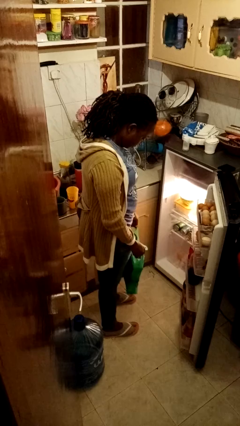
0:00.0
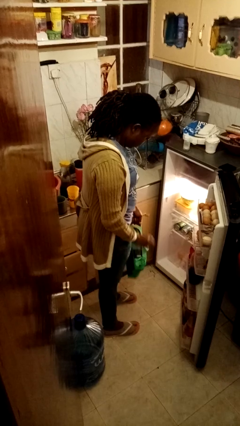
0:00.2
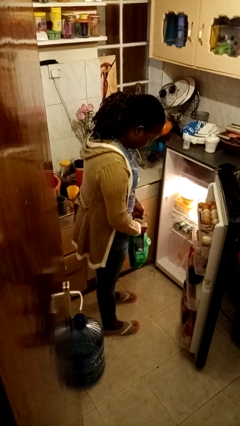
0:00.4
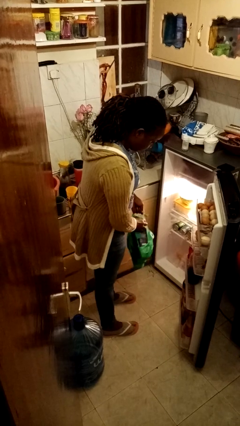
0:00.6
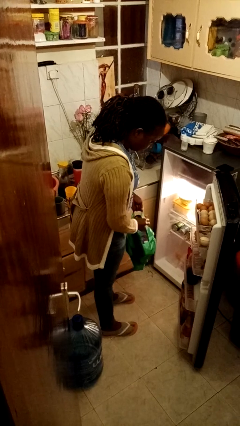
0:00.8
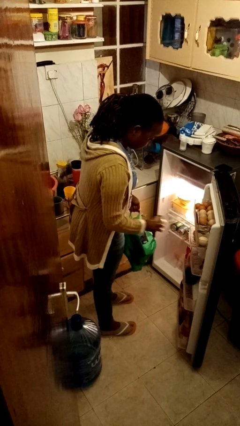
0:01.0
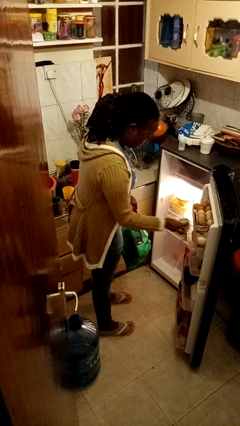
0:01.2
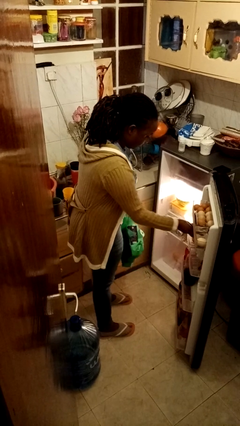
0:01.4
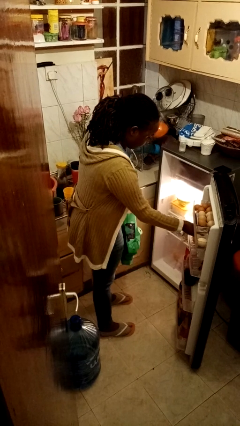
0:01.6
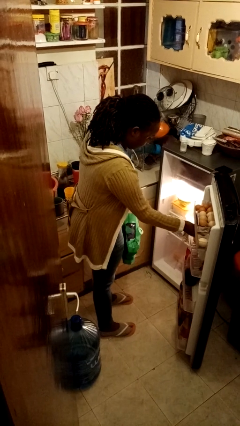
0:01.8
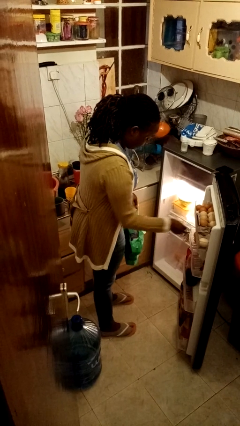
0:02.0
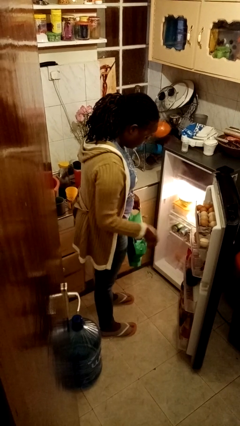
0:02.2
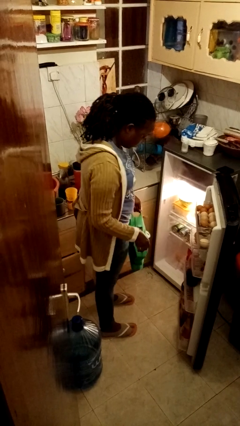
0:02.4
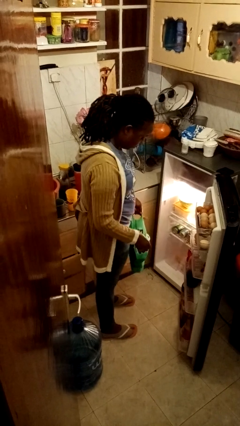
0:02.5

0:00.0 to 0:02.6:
person loads groceries into refrigerator

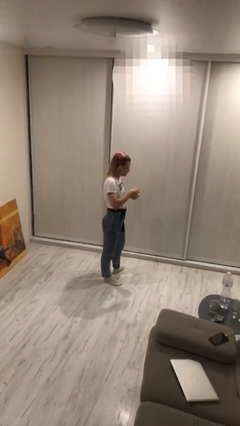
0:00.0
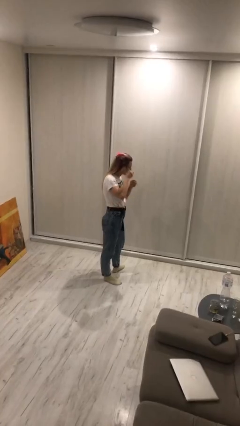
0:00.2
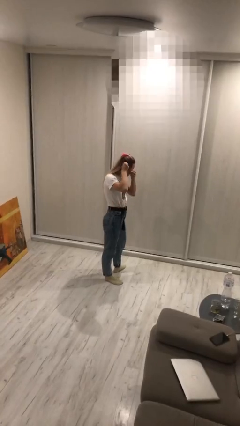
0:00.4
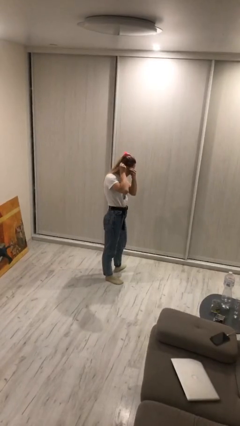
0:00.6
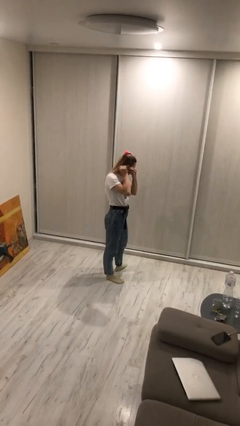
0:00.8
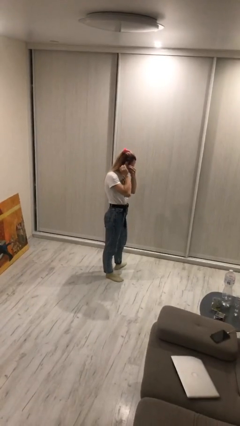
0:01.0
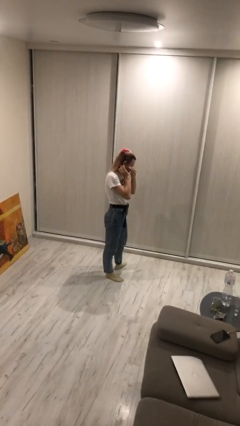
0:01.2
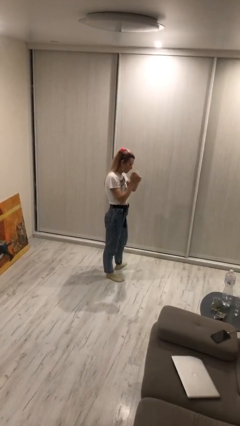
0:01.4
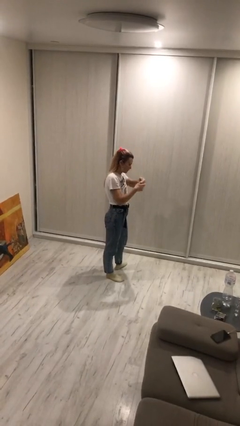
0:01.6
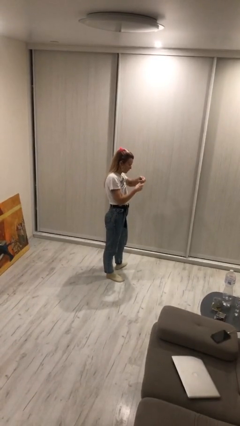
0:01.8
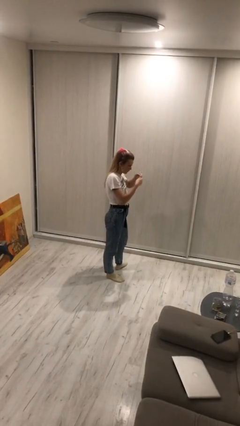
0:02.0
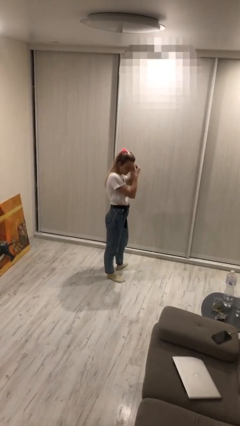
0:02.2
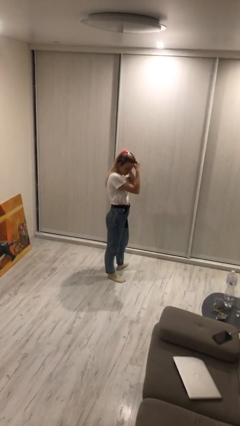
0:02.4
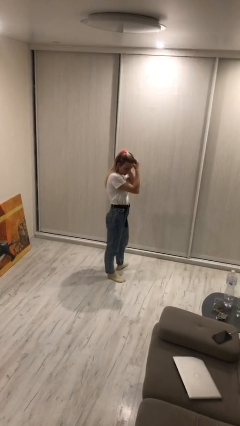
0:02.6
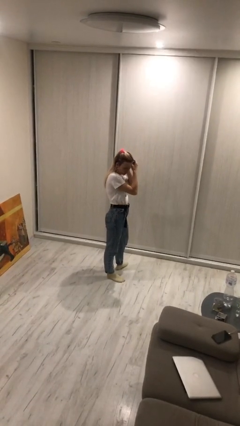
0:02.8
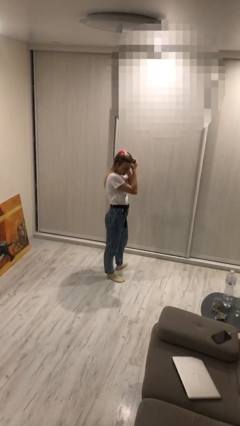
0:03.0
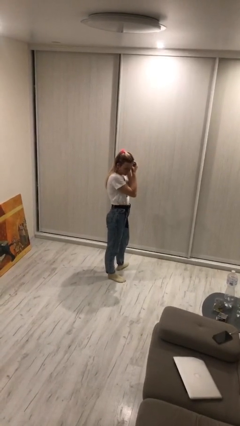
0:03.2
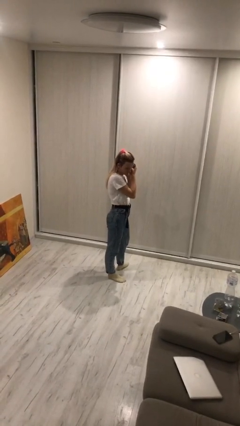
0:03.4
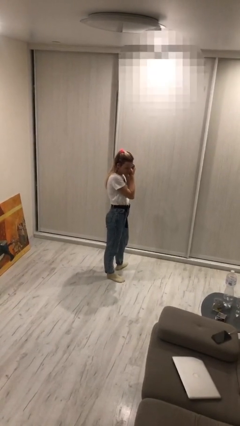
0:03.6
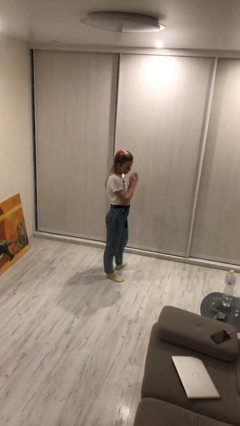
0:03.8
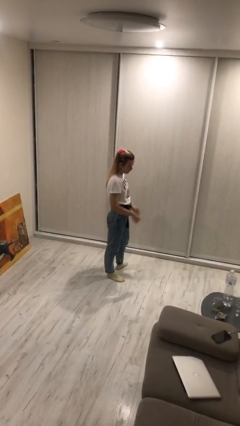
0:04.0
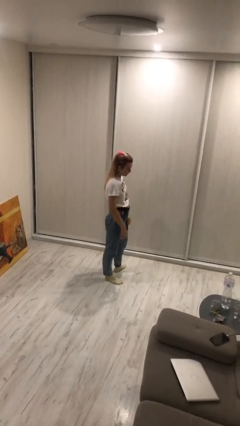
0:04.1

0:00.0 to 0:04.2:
person puts on earrings

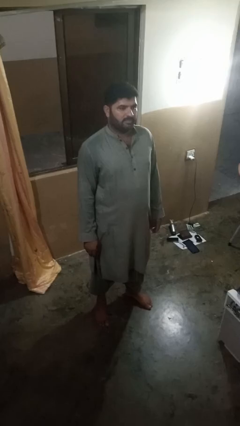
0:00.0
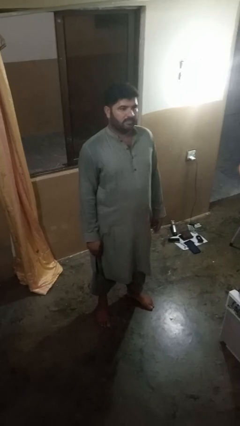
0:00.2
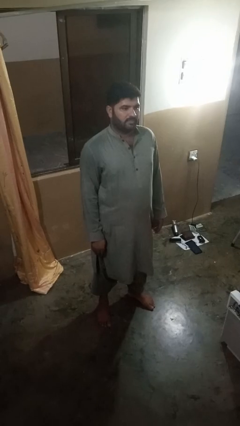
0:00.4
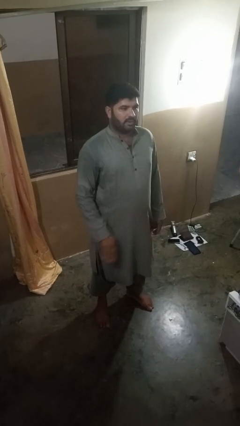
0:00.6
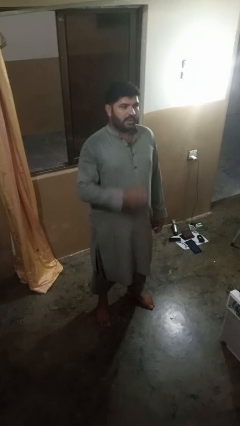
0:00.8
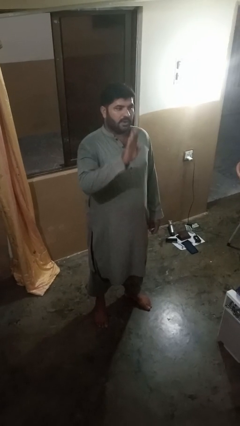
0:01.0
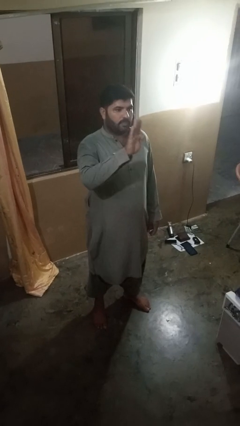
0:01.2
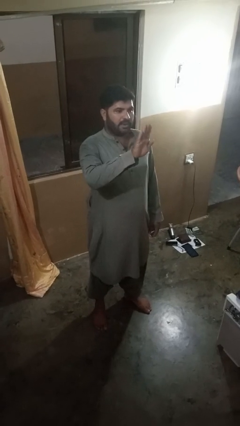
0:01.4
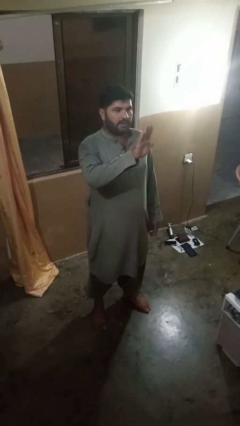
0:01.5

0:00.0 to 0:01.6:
person gestures stop

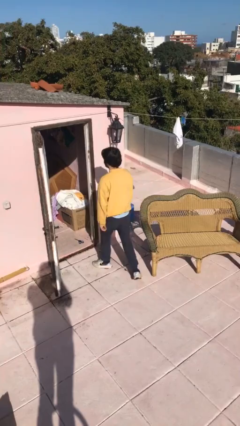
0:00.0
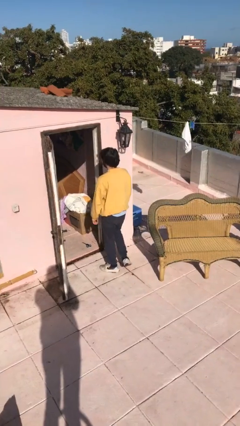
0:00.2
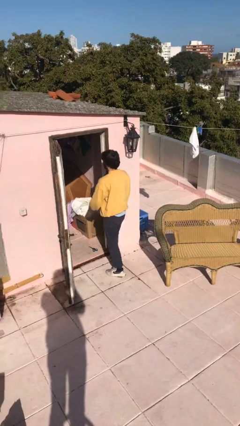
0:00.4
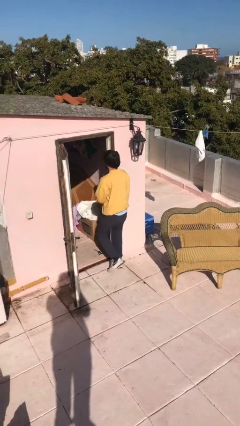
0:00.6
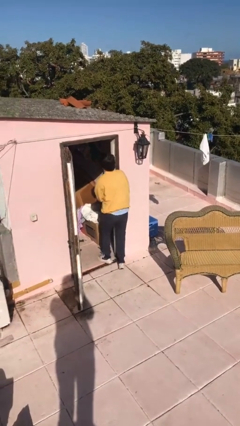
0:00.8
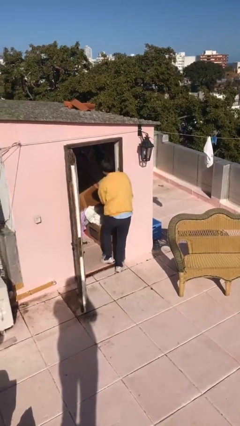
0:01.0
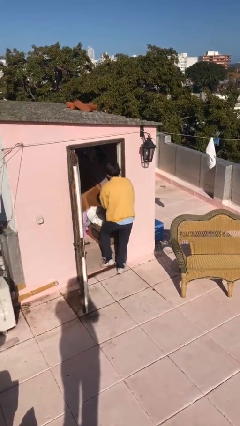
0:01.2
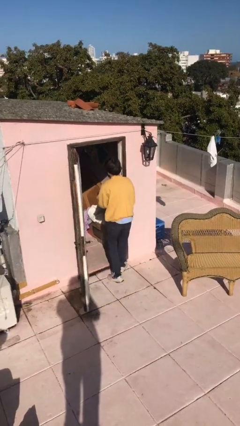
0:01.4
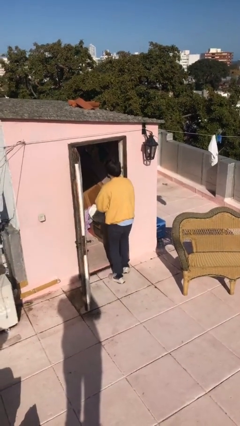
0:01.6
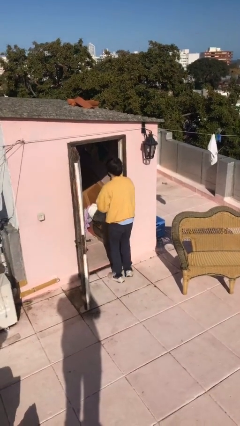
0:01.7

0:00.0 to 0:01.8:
person bumps into wall

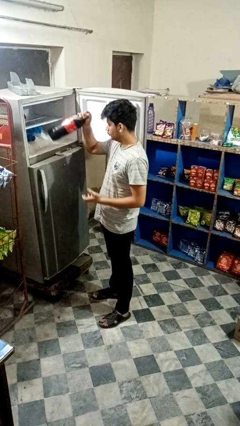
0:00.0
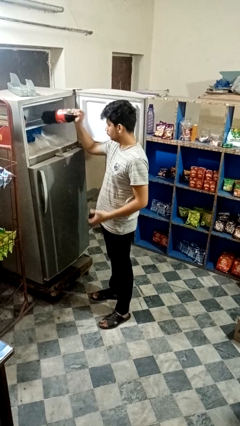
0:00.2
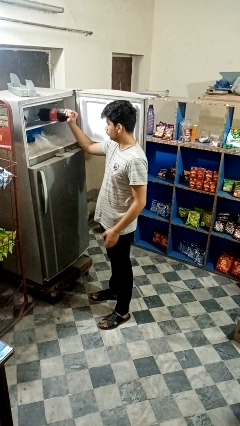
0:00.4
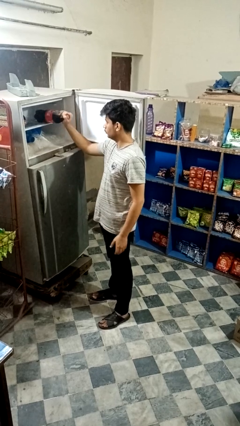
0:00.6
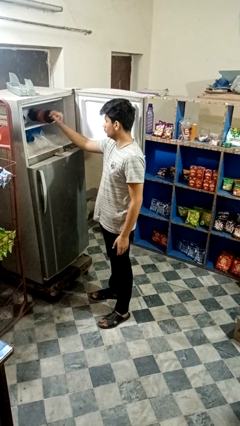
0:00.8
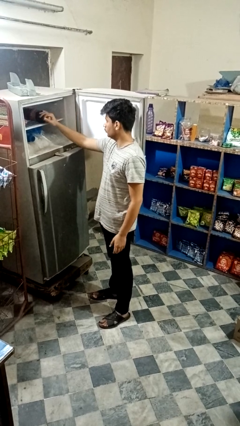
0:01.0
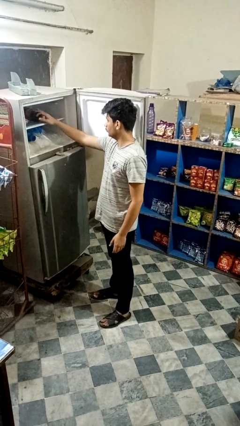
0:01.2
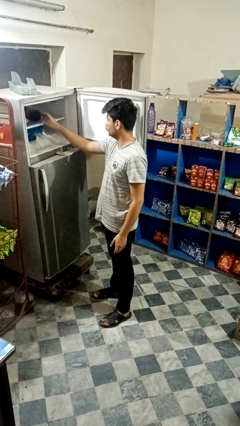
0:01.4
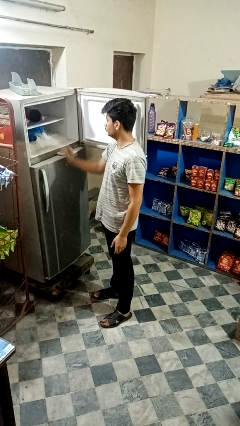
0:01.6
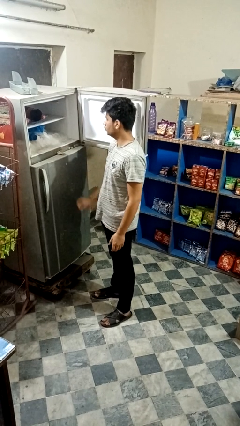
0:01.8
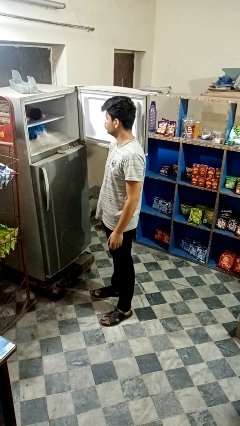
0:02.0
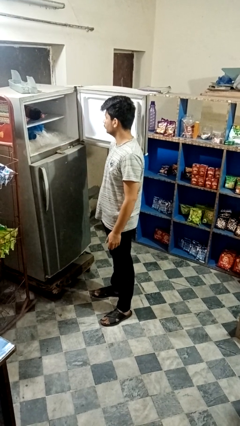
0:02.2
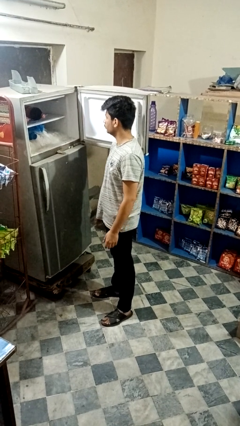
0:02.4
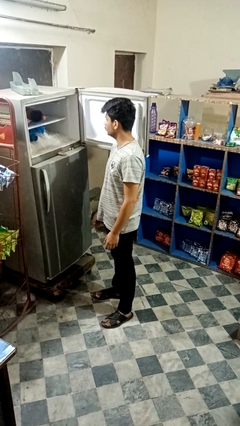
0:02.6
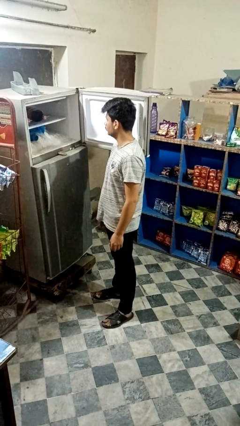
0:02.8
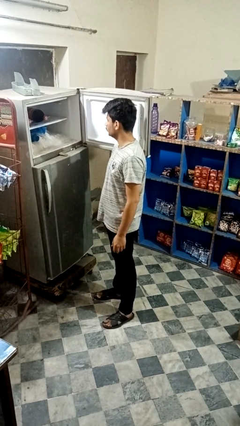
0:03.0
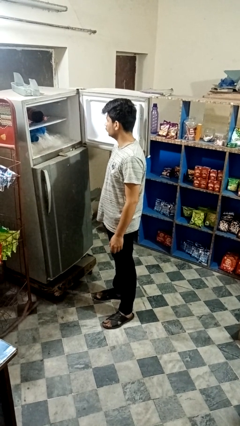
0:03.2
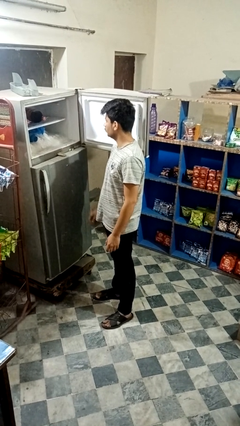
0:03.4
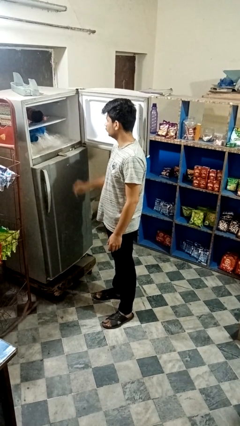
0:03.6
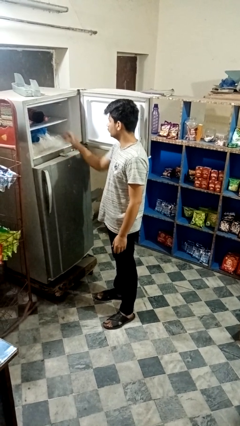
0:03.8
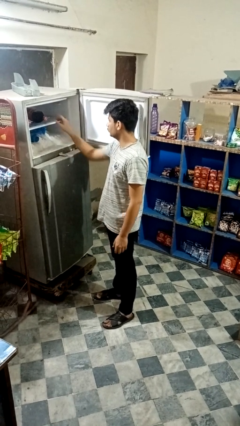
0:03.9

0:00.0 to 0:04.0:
person puts object into refrigerator

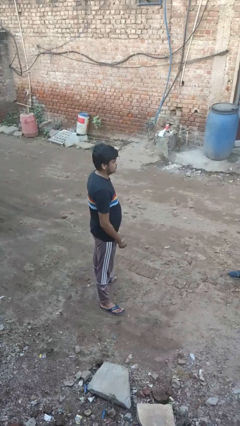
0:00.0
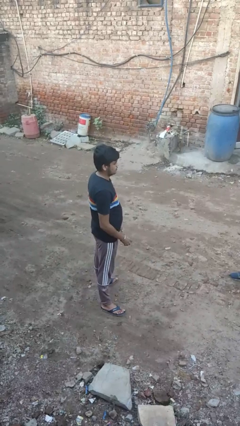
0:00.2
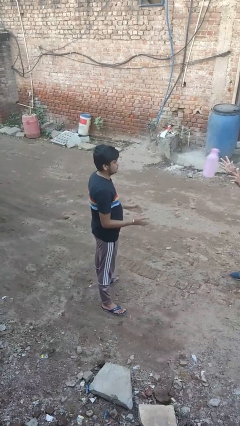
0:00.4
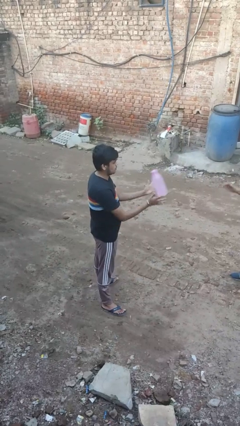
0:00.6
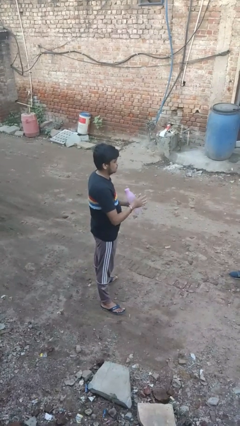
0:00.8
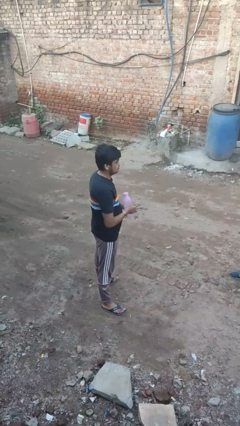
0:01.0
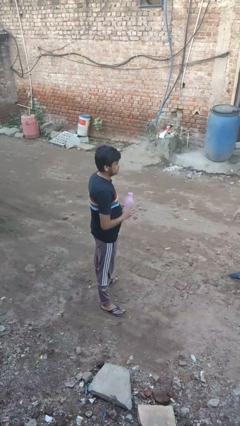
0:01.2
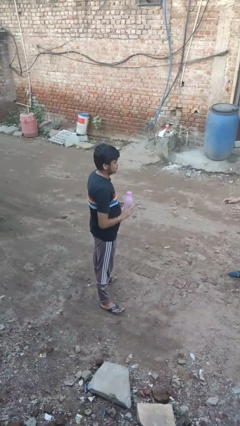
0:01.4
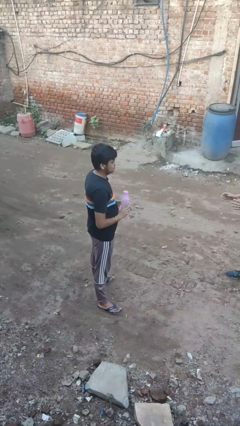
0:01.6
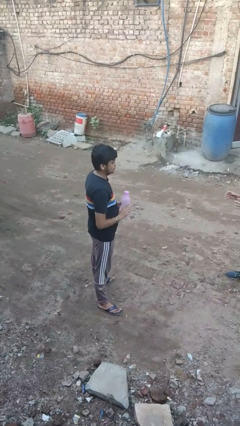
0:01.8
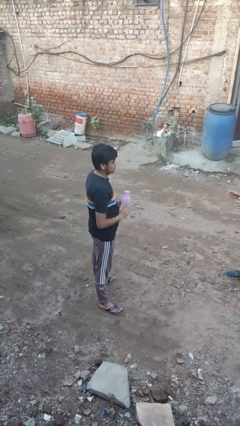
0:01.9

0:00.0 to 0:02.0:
person catches object from person

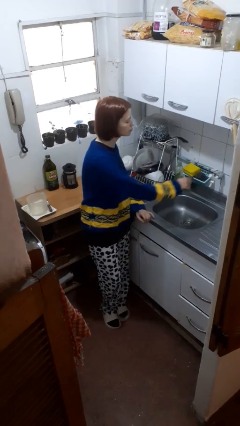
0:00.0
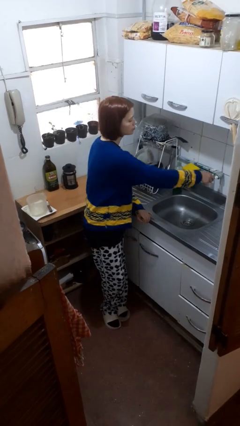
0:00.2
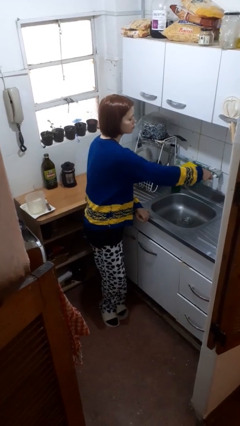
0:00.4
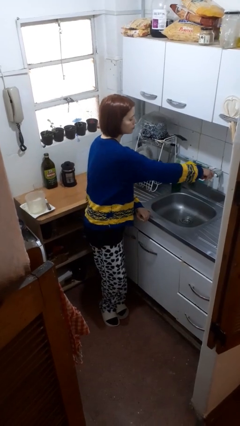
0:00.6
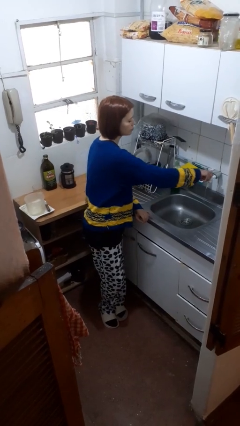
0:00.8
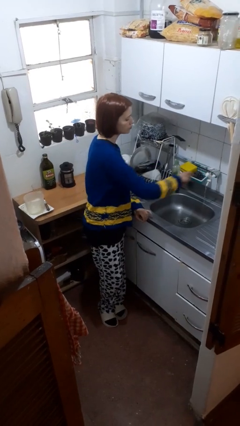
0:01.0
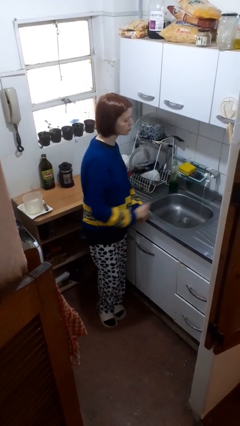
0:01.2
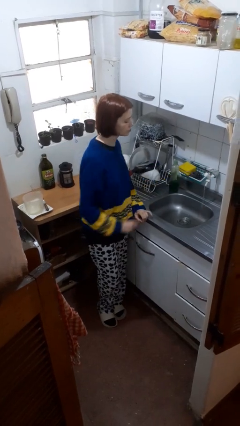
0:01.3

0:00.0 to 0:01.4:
person turns on faucet
